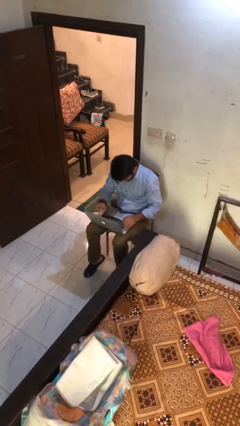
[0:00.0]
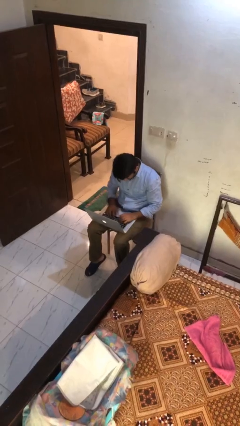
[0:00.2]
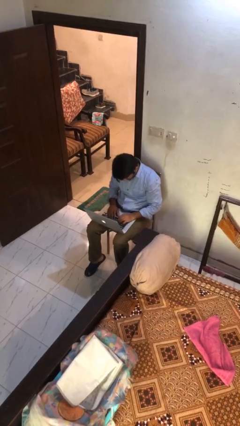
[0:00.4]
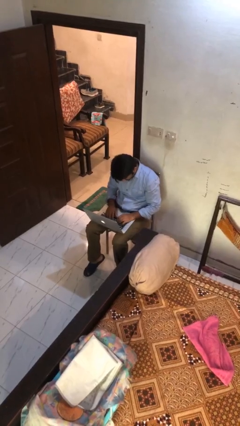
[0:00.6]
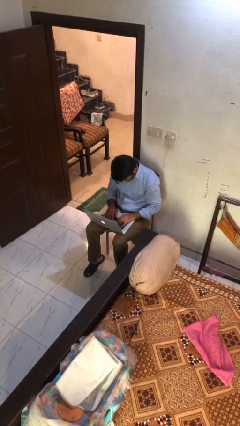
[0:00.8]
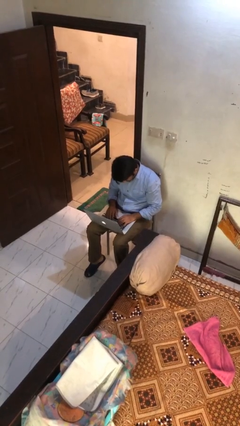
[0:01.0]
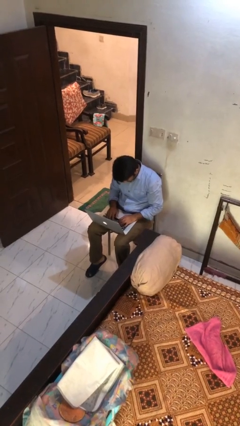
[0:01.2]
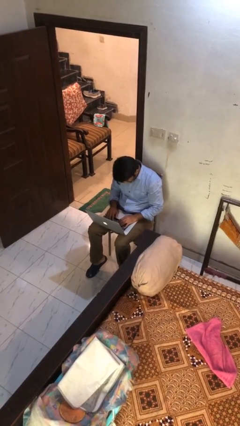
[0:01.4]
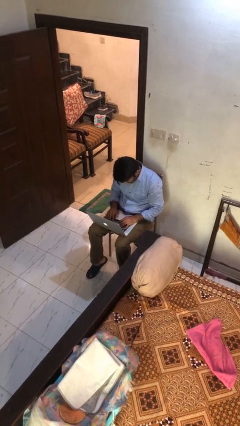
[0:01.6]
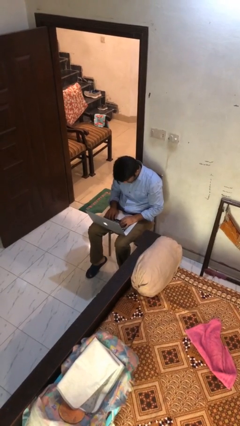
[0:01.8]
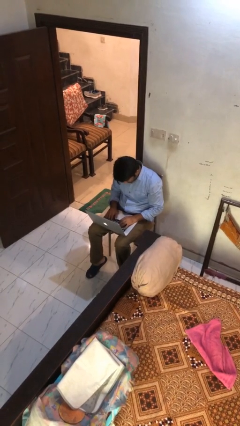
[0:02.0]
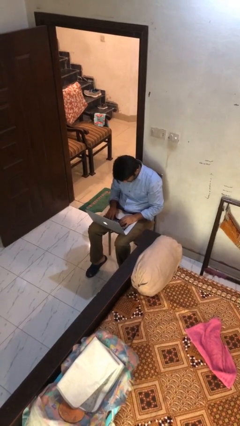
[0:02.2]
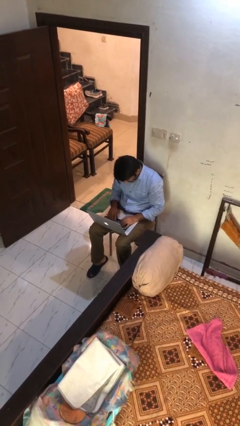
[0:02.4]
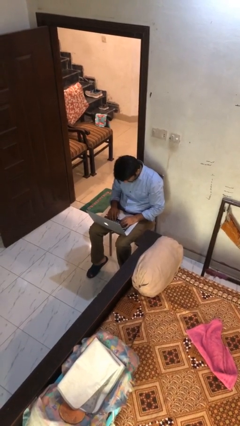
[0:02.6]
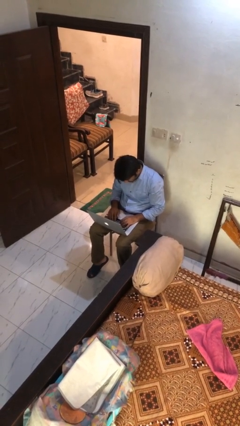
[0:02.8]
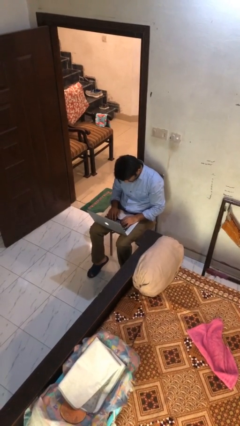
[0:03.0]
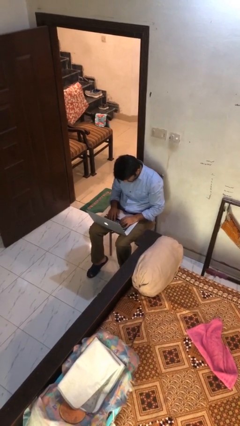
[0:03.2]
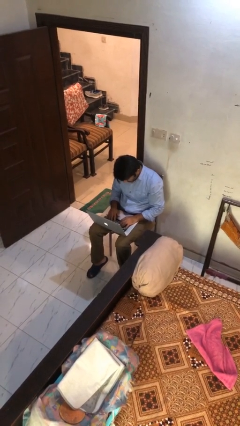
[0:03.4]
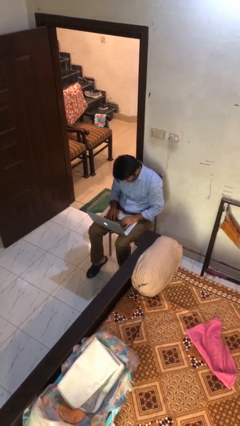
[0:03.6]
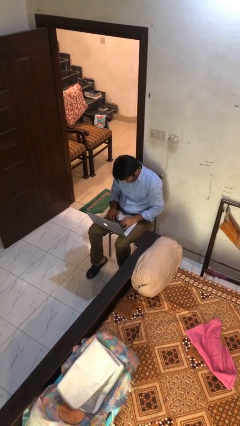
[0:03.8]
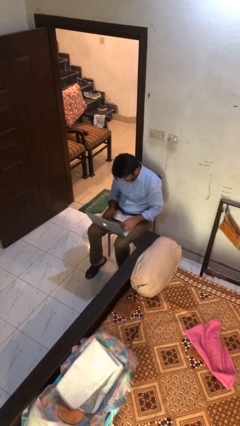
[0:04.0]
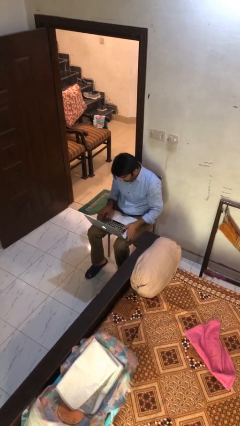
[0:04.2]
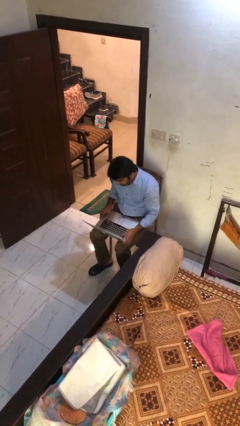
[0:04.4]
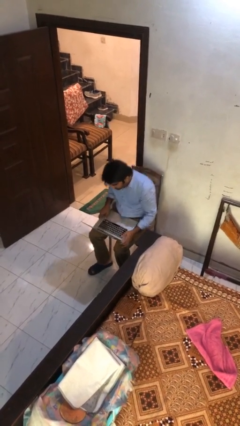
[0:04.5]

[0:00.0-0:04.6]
person interacts with laptop

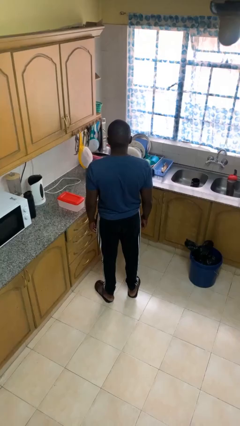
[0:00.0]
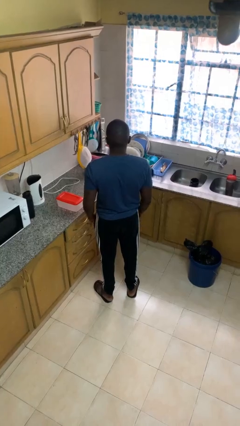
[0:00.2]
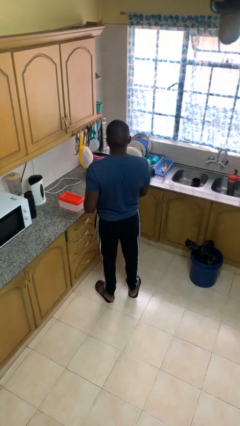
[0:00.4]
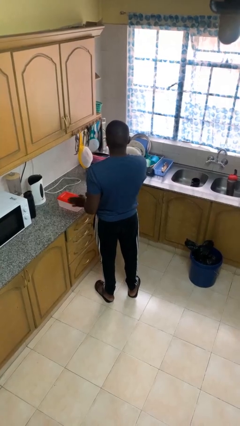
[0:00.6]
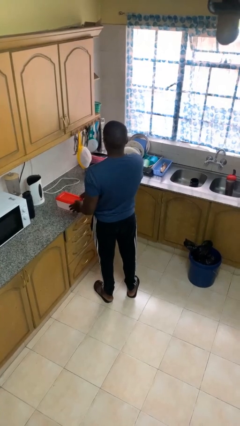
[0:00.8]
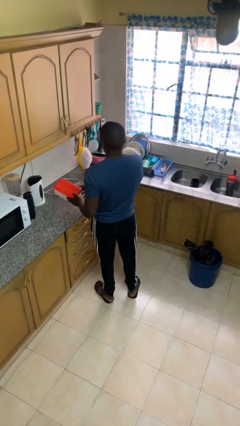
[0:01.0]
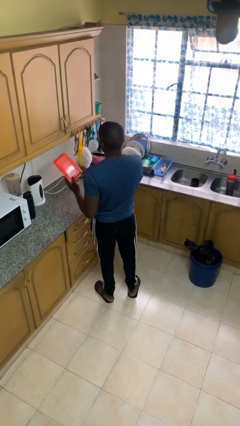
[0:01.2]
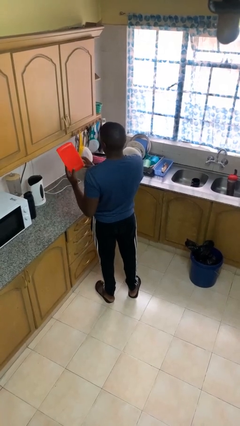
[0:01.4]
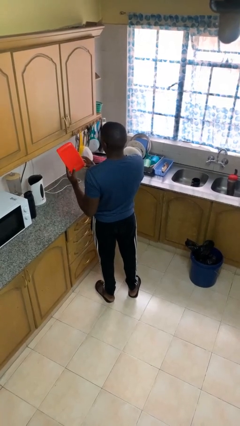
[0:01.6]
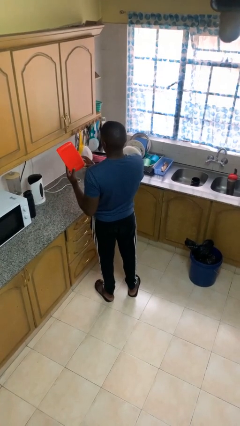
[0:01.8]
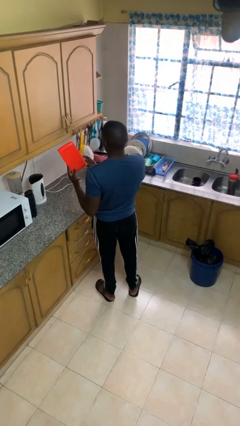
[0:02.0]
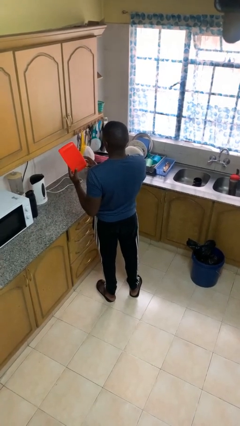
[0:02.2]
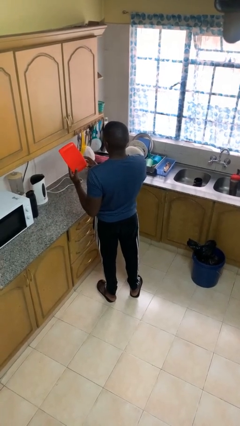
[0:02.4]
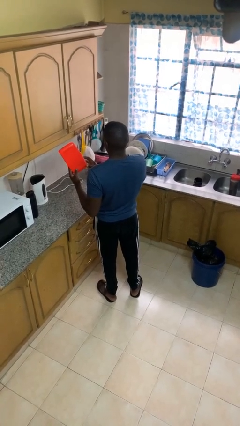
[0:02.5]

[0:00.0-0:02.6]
person picks up object from countertop

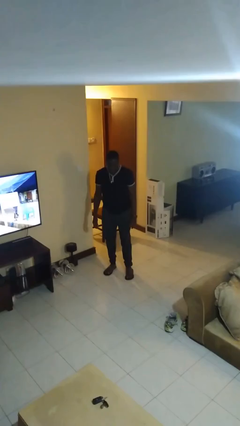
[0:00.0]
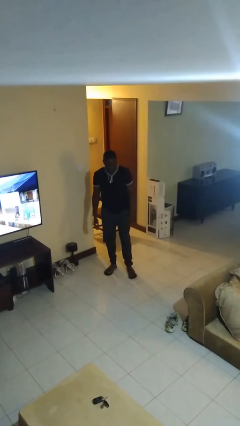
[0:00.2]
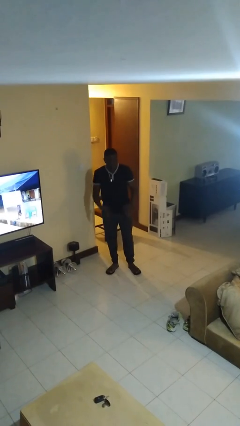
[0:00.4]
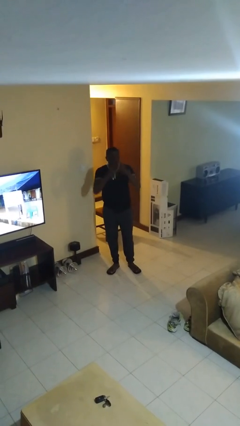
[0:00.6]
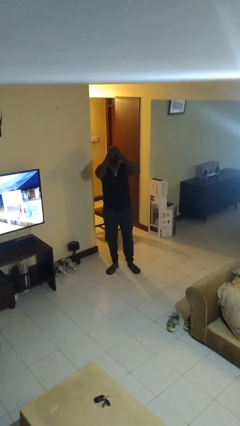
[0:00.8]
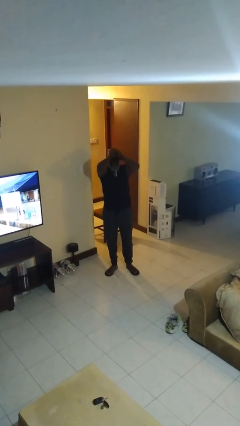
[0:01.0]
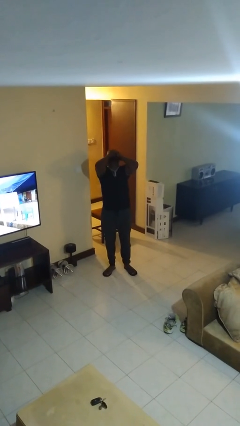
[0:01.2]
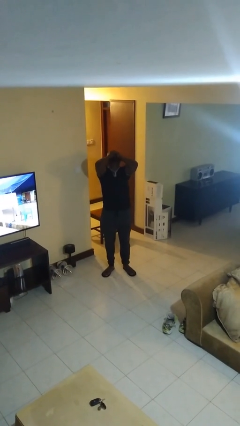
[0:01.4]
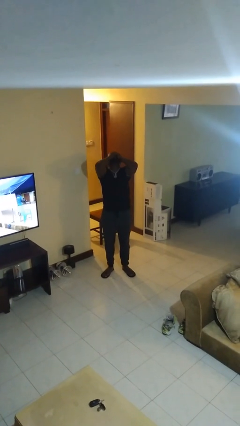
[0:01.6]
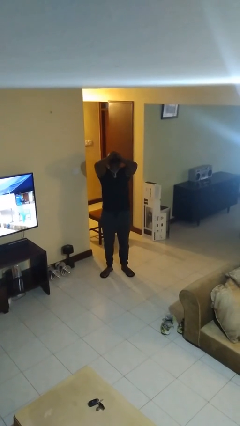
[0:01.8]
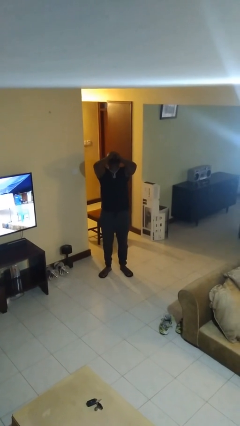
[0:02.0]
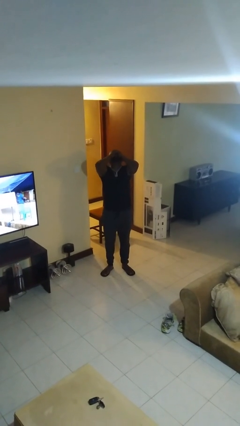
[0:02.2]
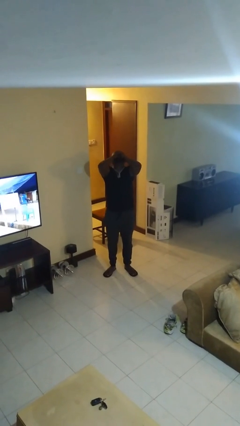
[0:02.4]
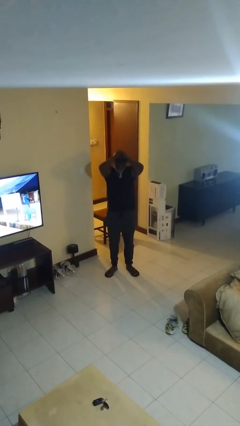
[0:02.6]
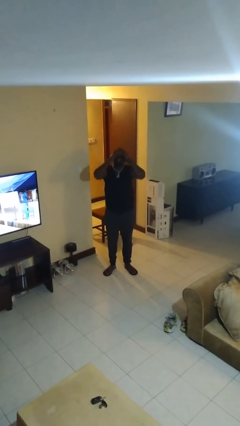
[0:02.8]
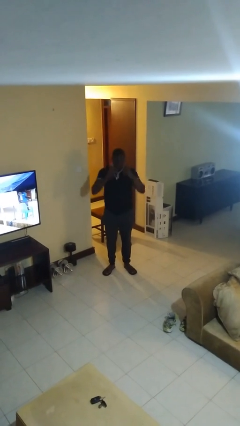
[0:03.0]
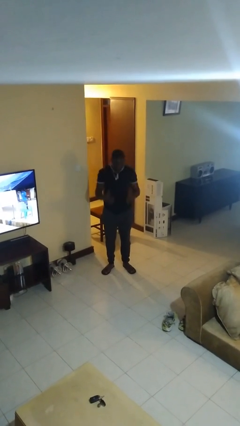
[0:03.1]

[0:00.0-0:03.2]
person covers face with hands

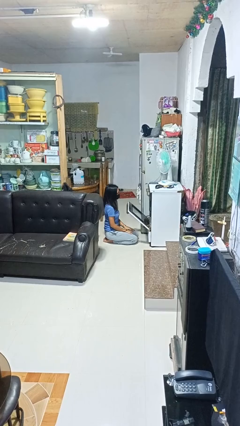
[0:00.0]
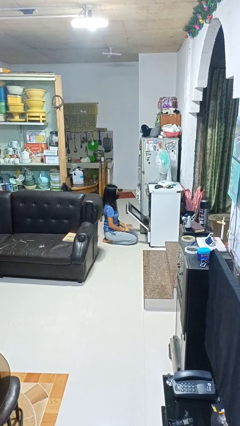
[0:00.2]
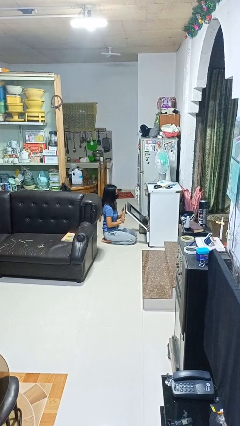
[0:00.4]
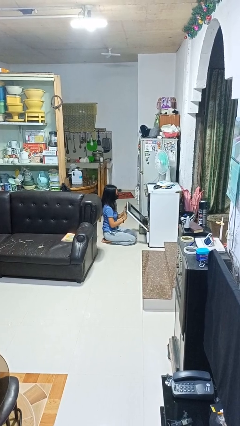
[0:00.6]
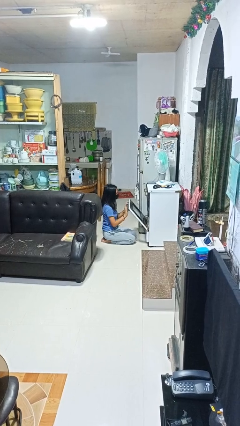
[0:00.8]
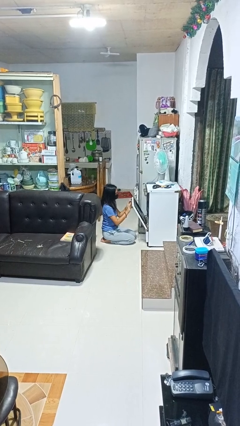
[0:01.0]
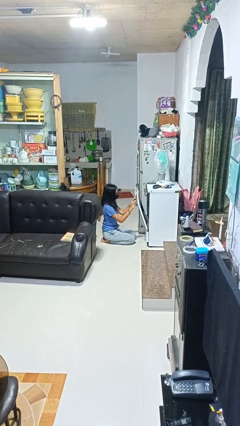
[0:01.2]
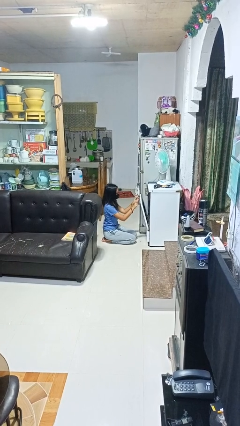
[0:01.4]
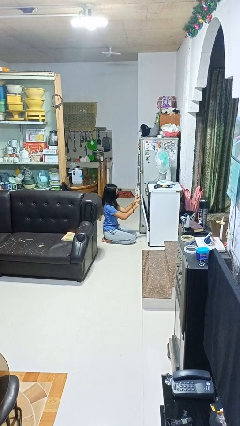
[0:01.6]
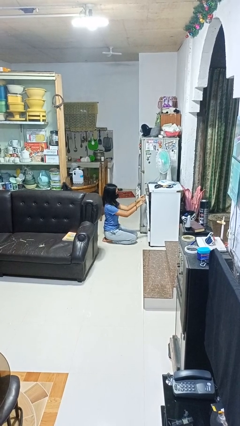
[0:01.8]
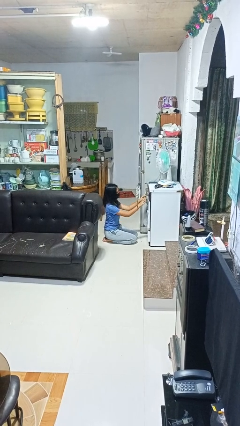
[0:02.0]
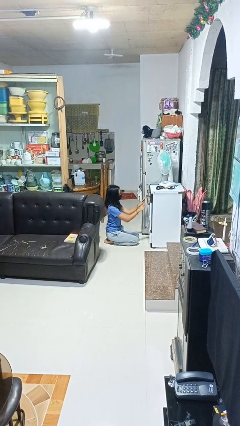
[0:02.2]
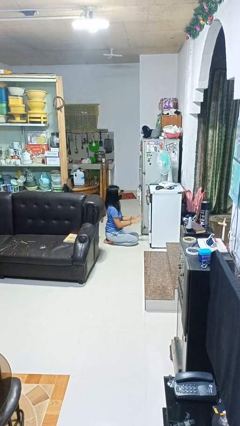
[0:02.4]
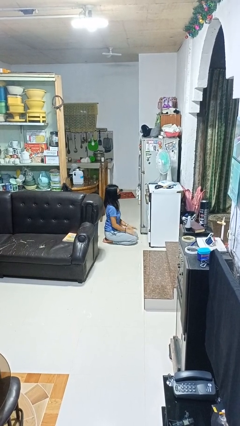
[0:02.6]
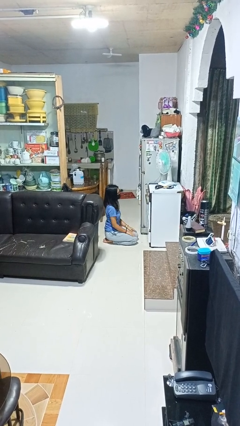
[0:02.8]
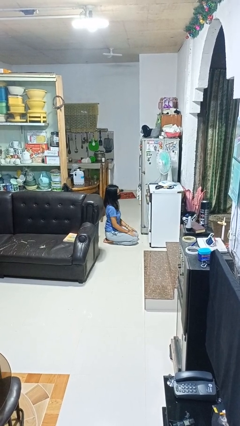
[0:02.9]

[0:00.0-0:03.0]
person closes oven door

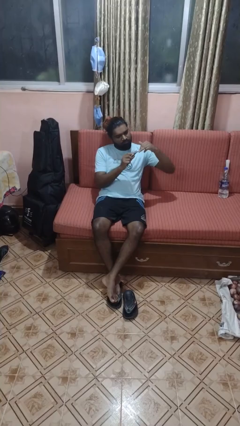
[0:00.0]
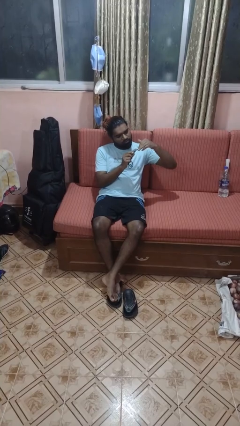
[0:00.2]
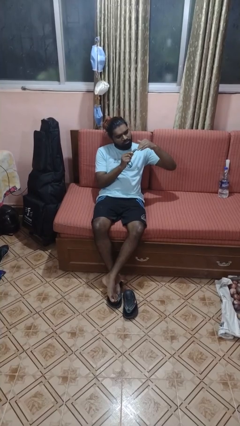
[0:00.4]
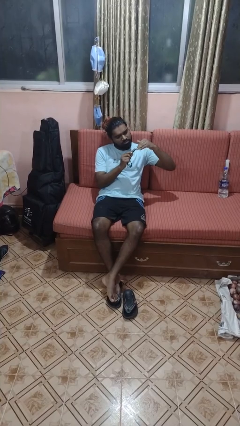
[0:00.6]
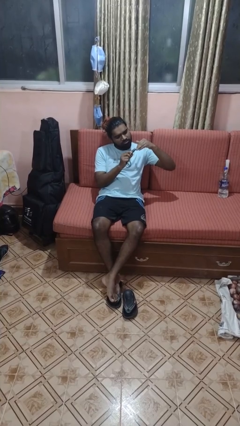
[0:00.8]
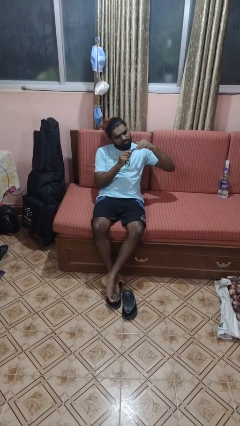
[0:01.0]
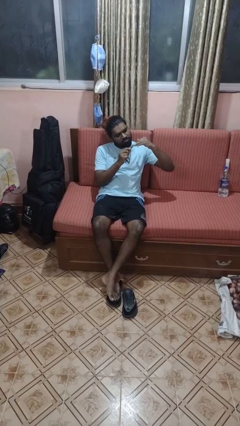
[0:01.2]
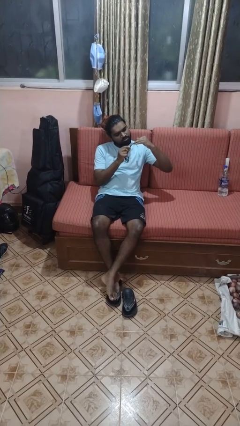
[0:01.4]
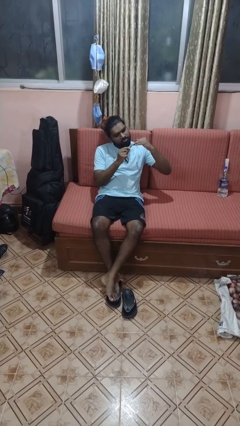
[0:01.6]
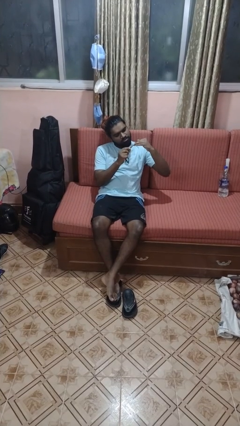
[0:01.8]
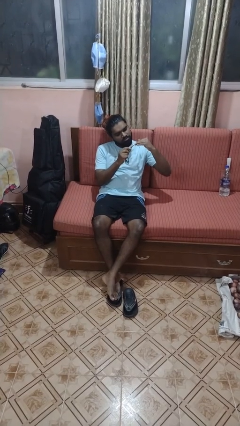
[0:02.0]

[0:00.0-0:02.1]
person clips fingernails

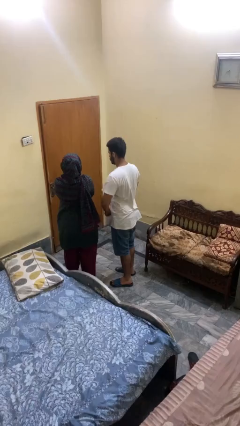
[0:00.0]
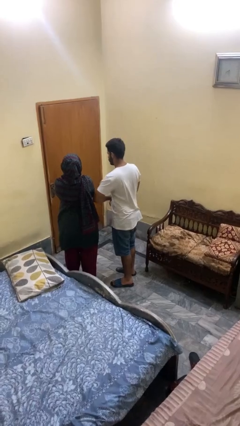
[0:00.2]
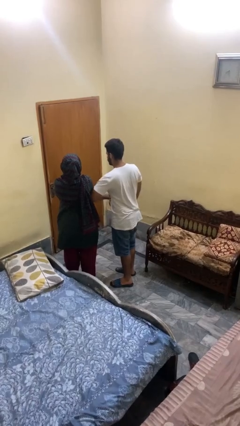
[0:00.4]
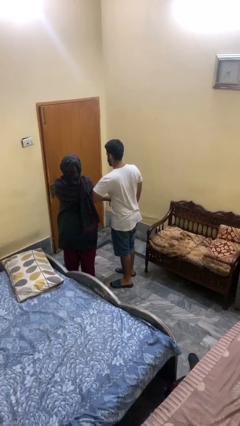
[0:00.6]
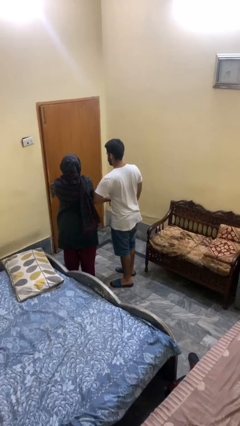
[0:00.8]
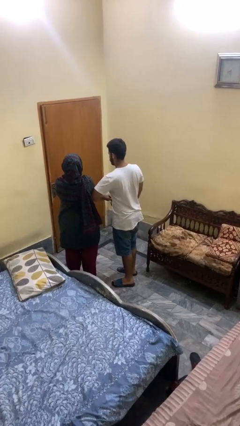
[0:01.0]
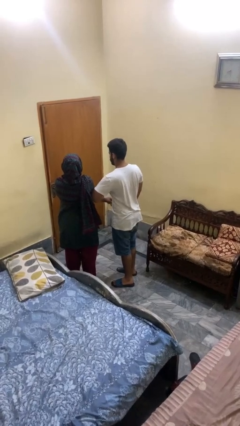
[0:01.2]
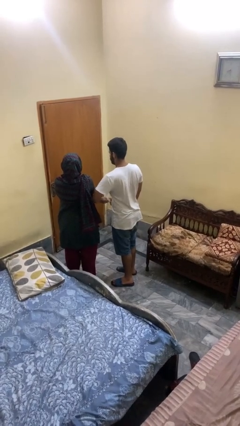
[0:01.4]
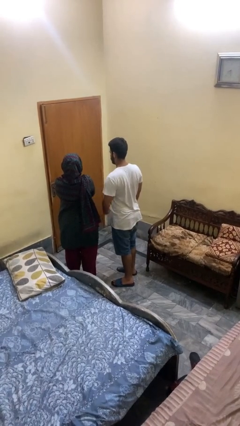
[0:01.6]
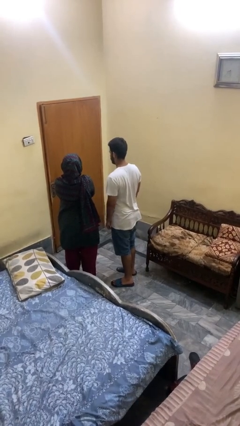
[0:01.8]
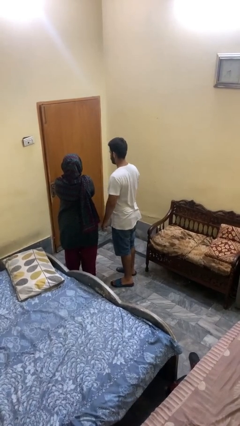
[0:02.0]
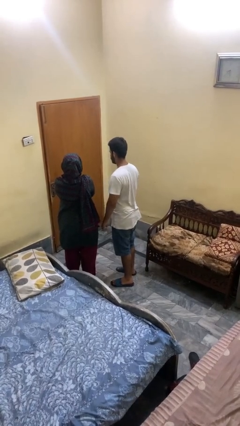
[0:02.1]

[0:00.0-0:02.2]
person nudges person with elbow
